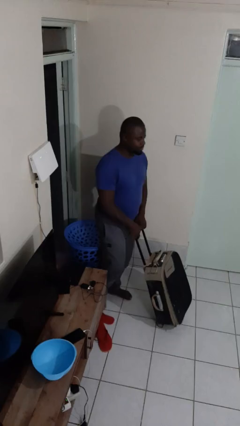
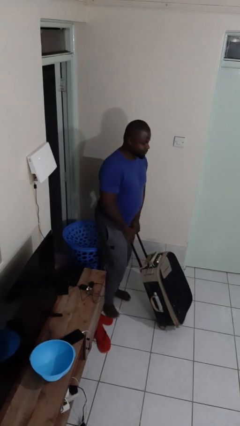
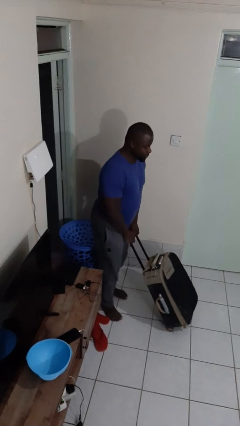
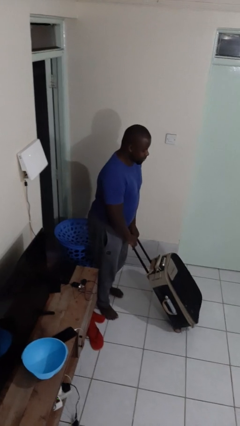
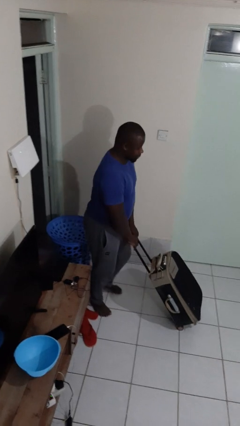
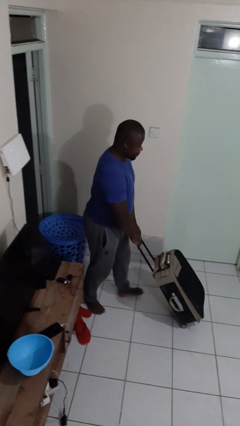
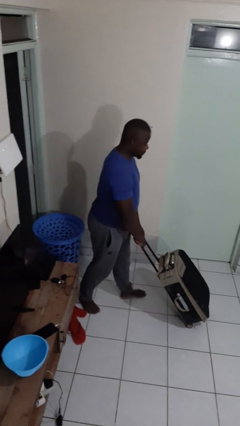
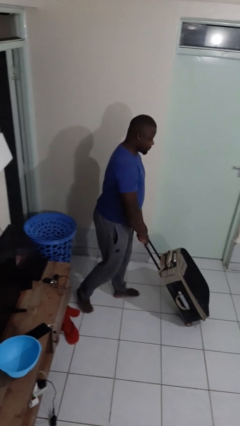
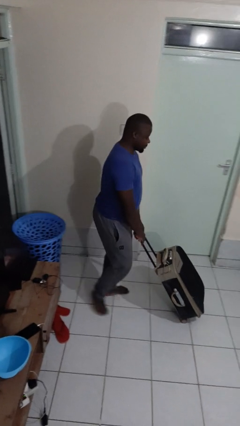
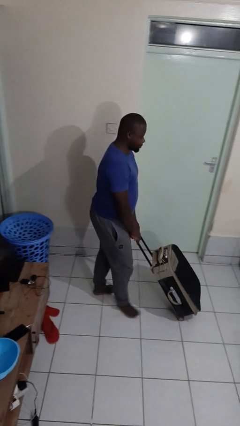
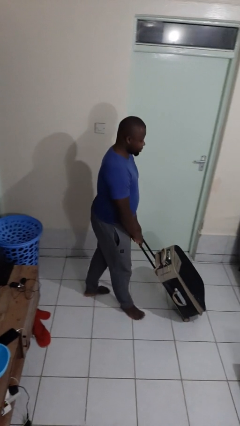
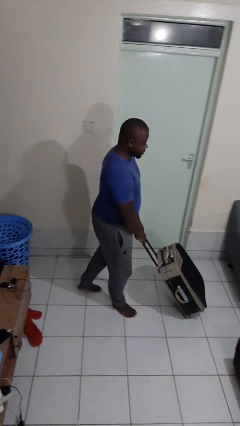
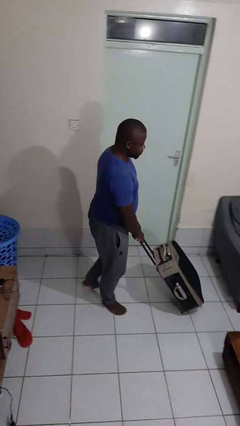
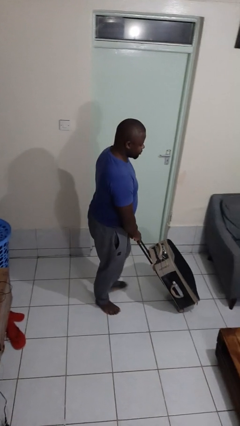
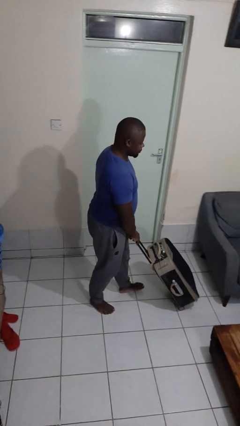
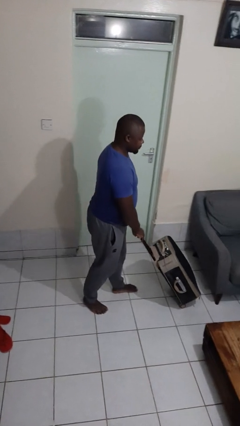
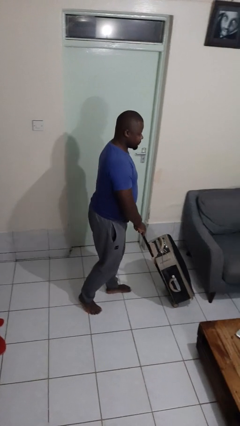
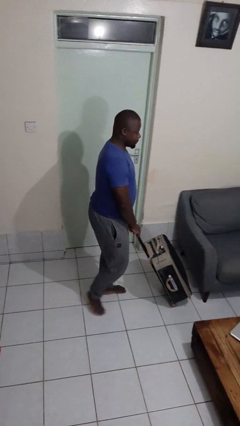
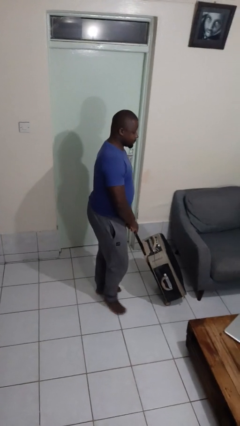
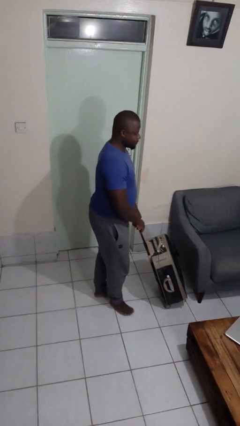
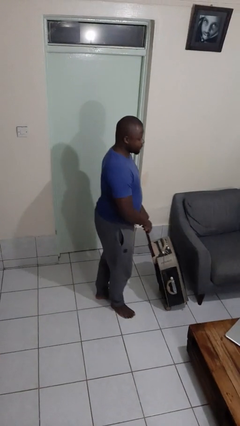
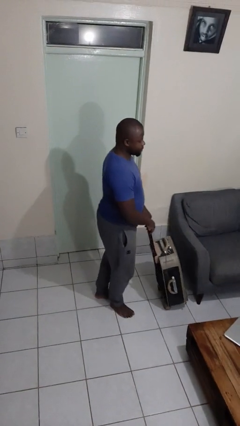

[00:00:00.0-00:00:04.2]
person pushes wheeled cart

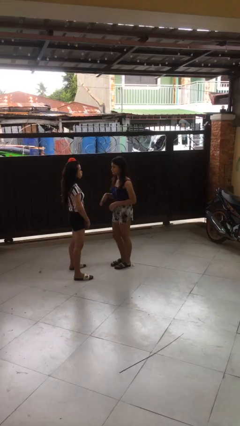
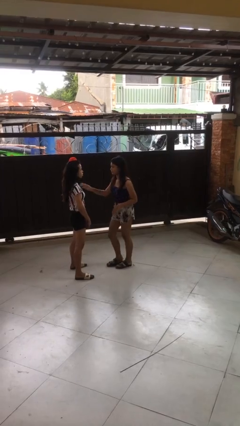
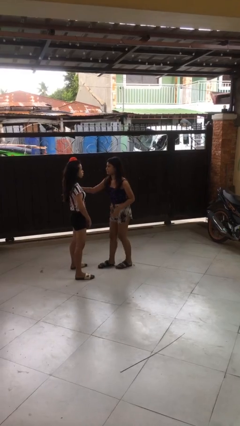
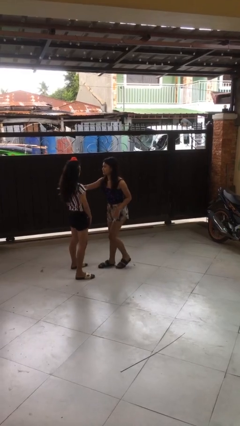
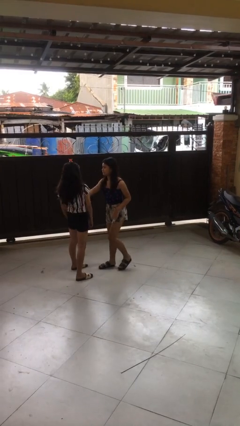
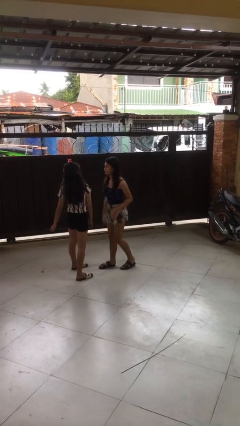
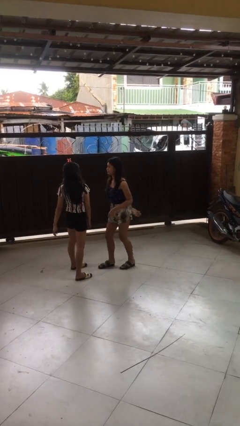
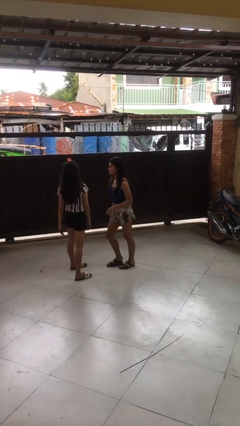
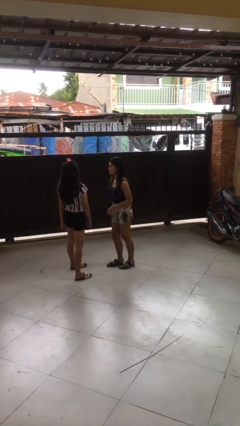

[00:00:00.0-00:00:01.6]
person shoves person

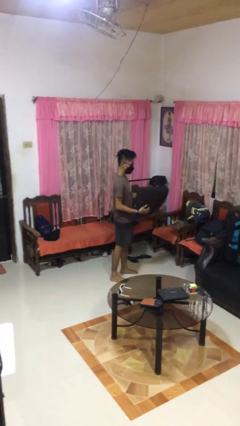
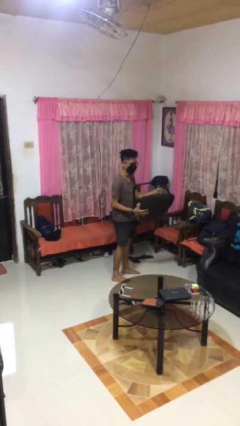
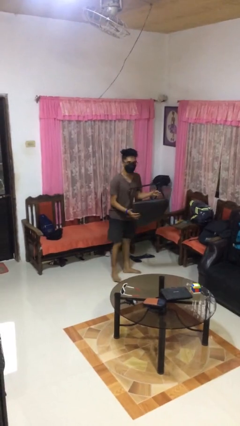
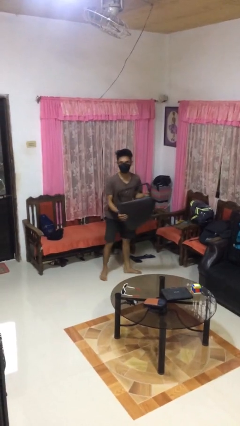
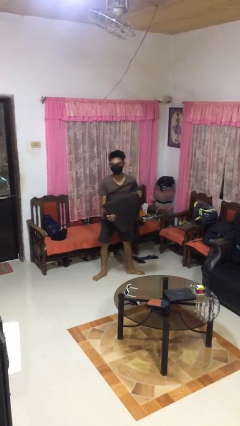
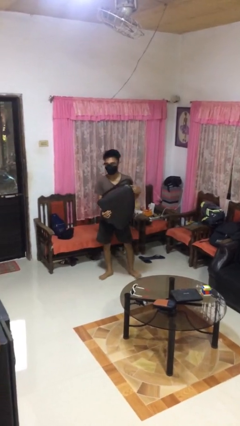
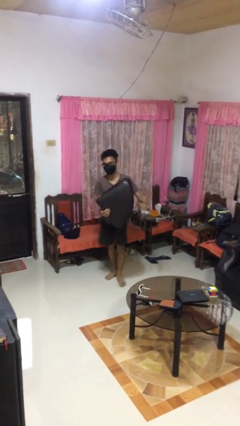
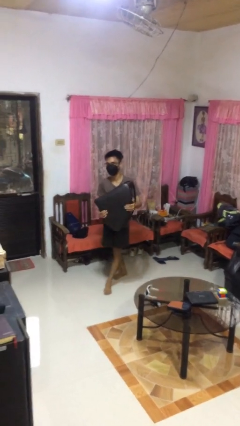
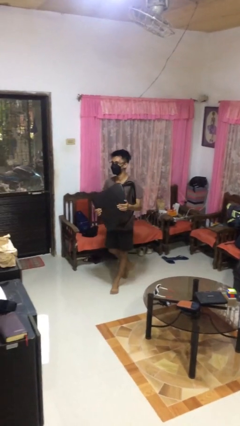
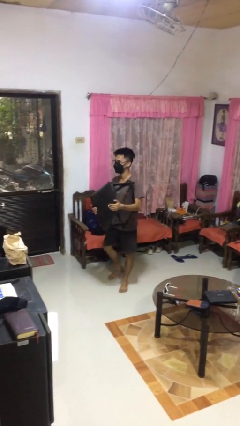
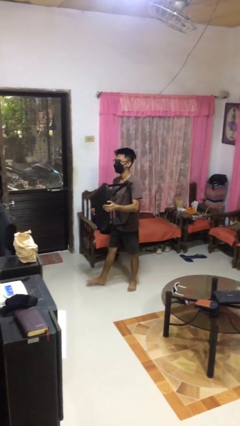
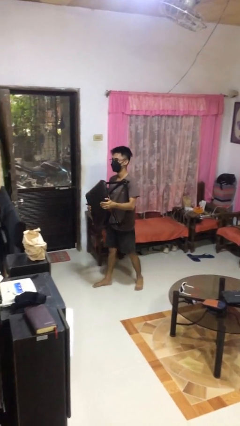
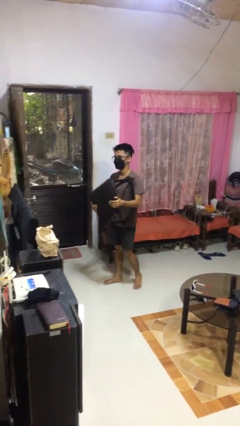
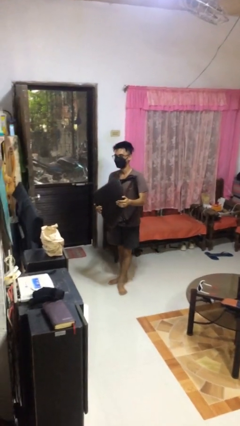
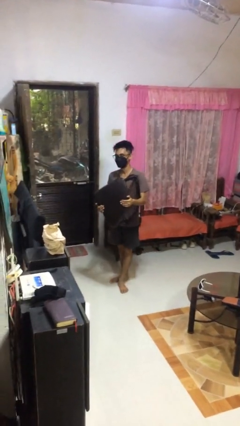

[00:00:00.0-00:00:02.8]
person carries furniture

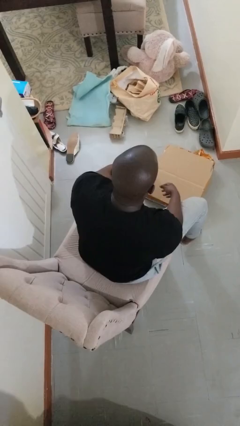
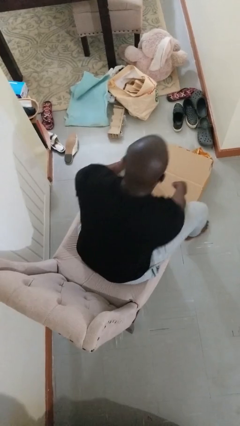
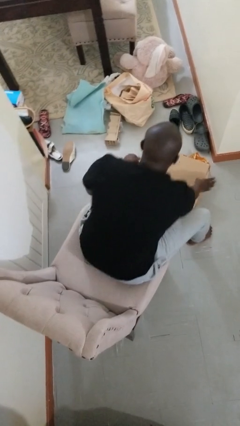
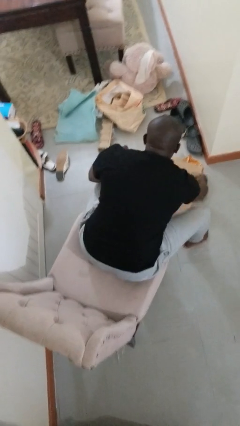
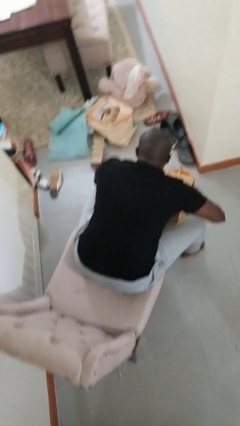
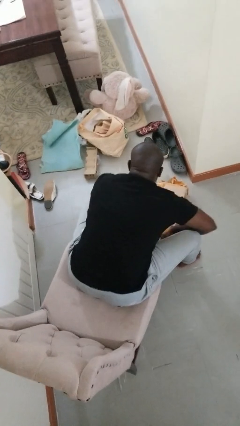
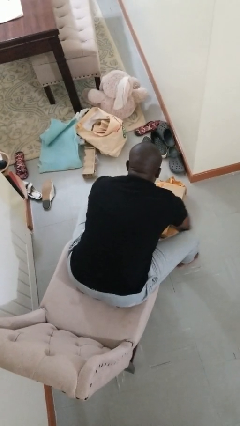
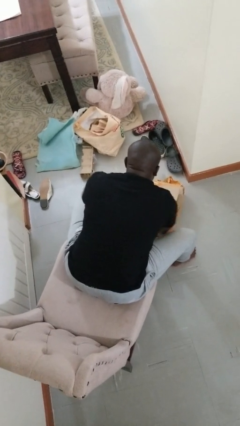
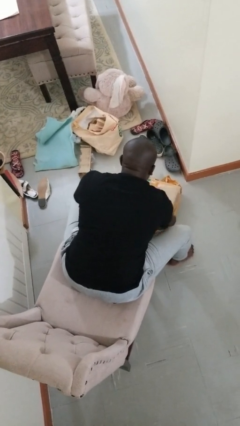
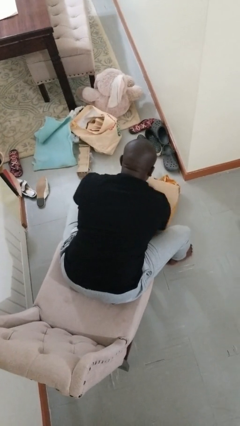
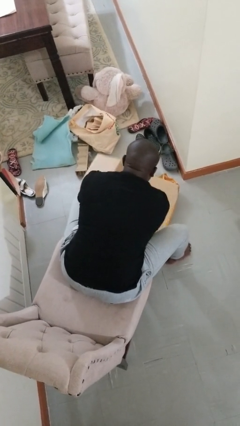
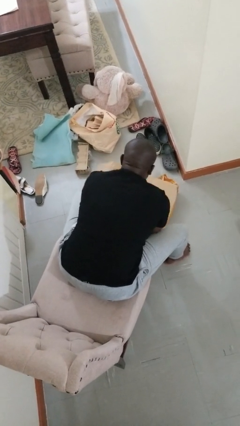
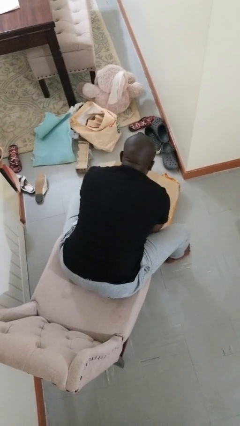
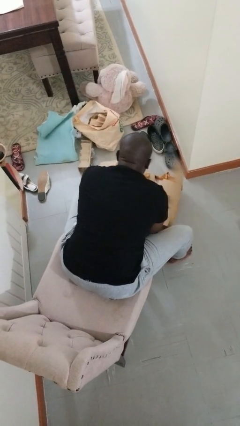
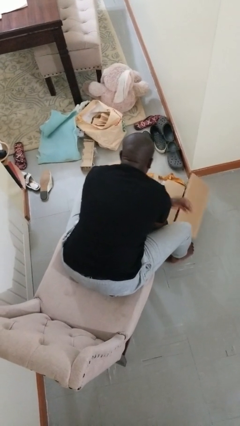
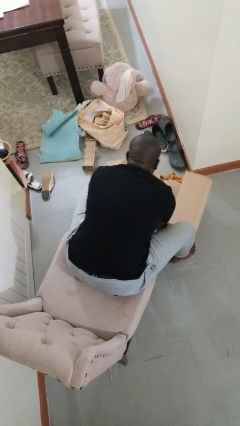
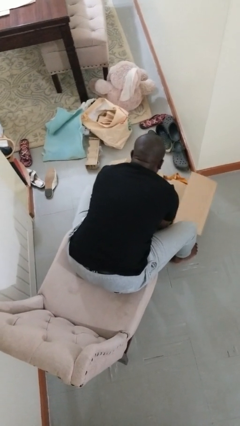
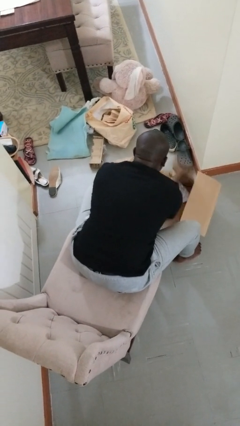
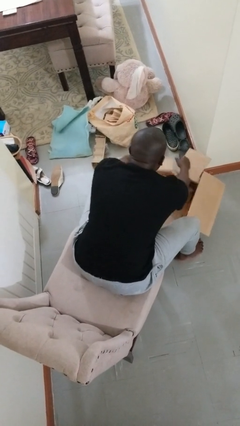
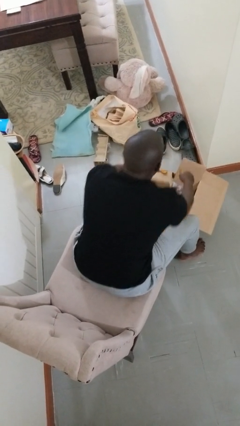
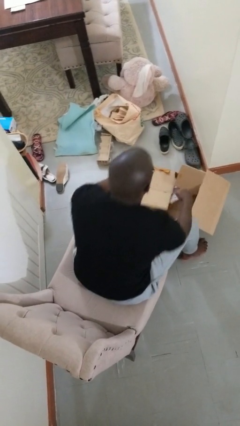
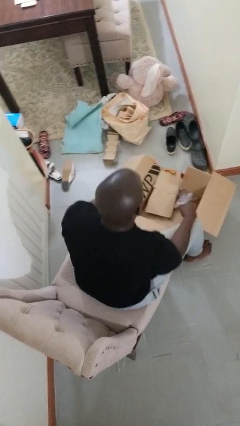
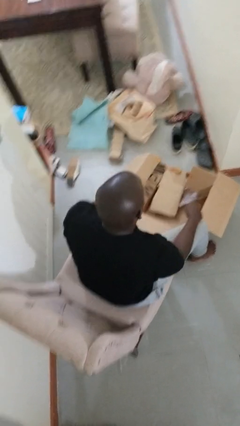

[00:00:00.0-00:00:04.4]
person opens box

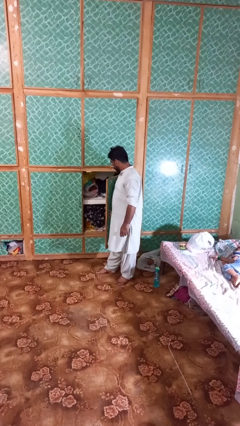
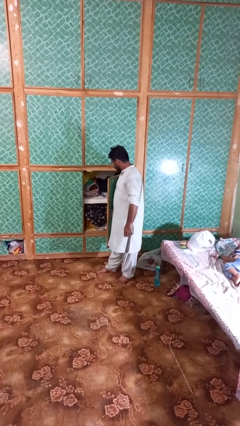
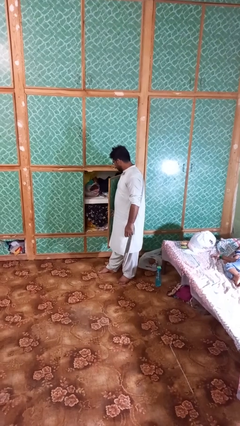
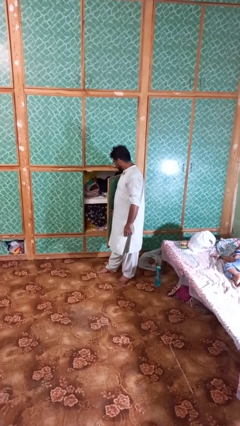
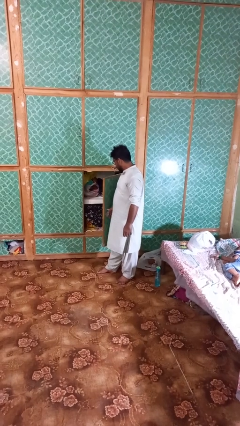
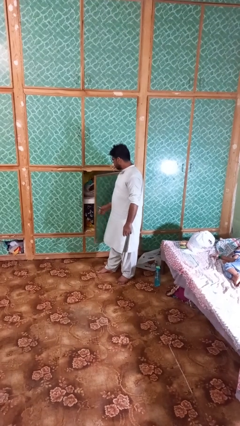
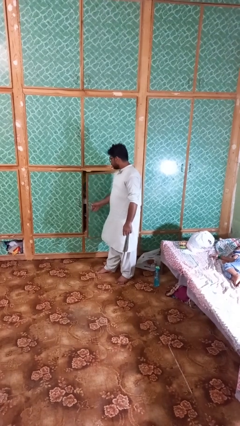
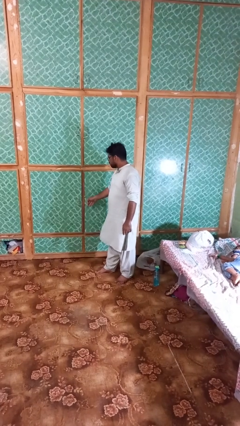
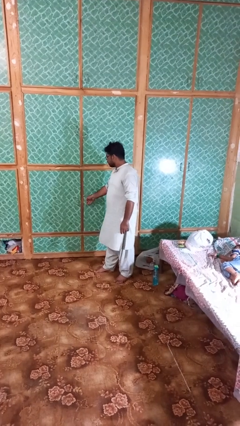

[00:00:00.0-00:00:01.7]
person closes closet door

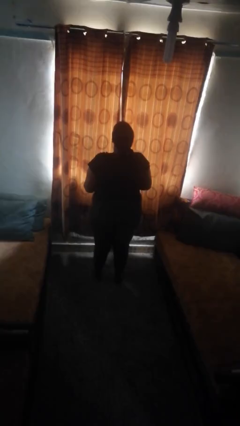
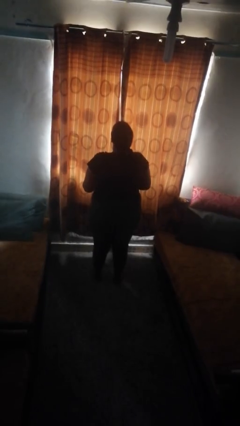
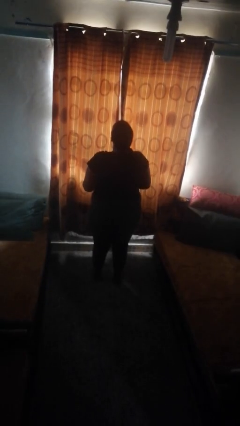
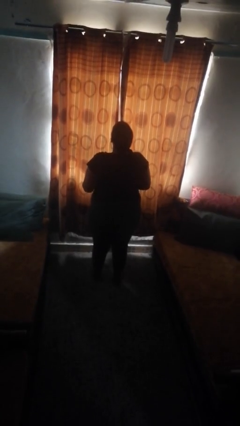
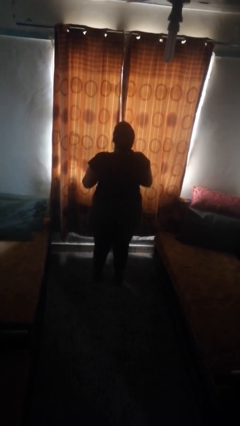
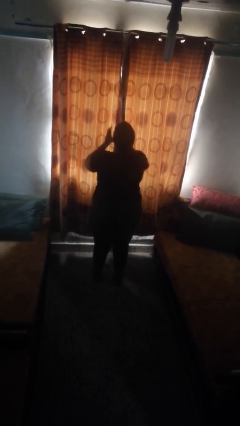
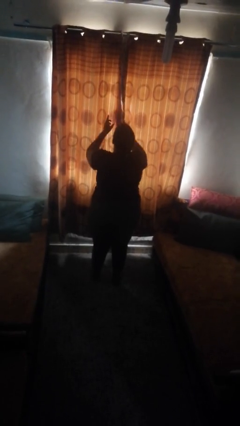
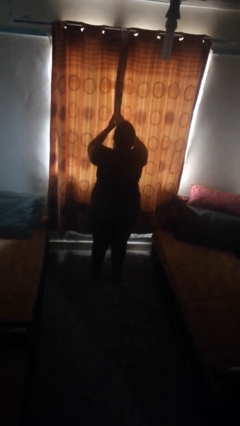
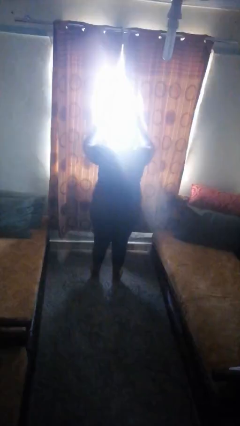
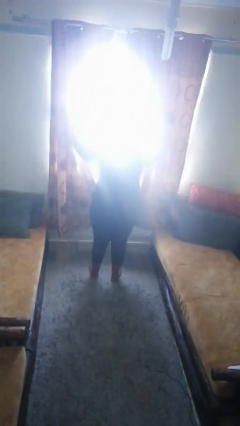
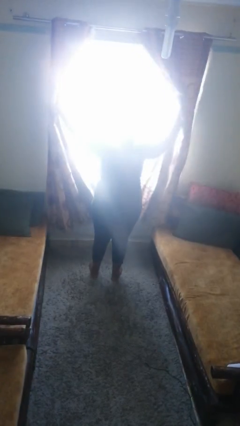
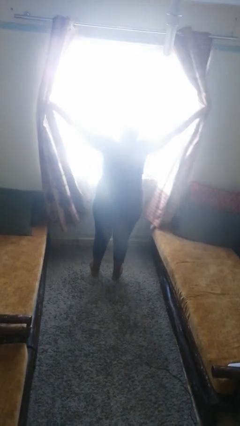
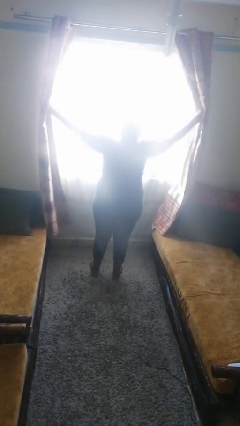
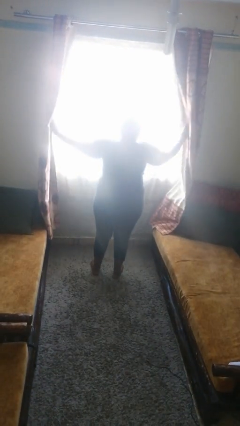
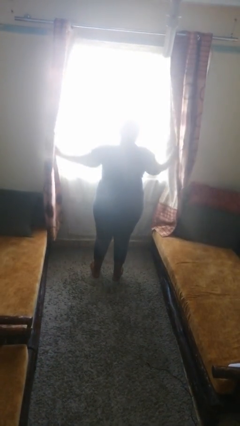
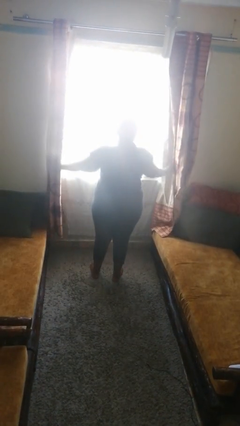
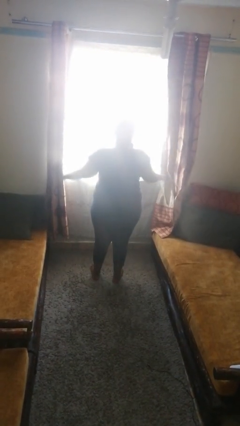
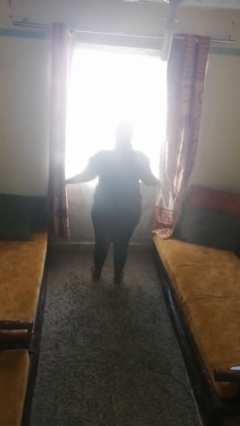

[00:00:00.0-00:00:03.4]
person opens curtains
